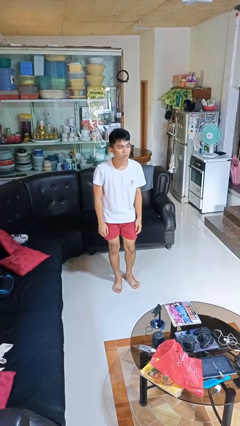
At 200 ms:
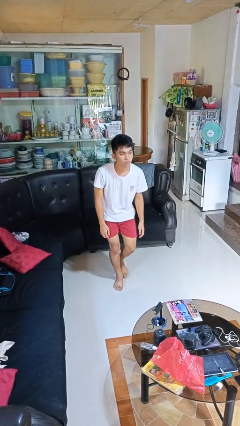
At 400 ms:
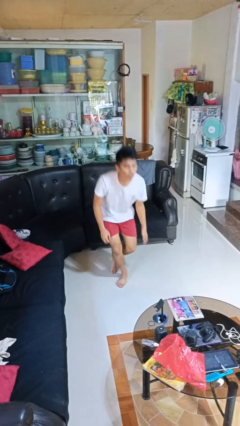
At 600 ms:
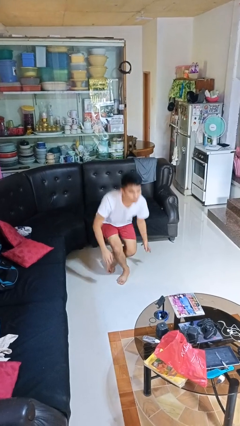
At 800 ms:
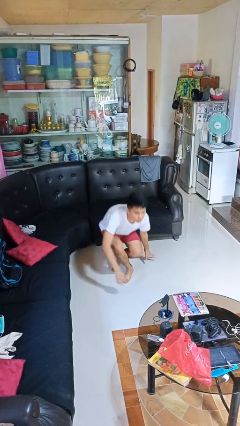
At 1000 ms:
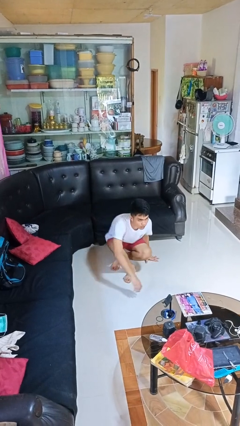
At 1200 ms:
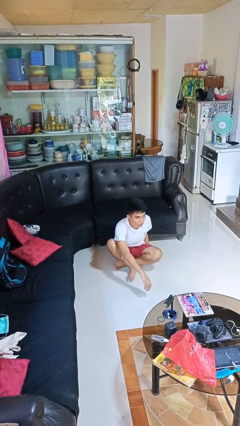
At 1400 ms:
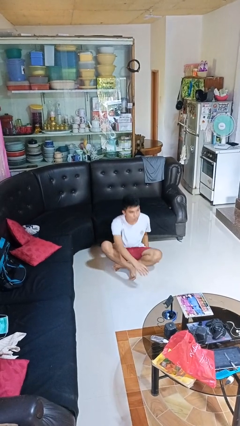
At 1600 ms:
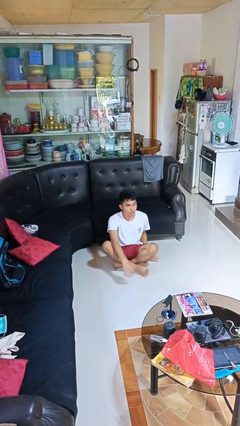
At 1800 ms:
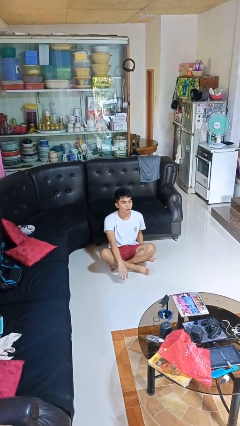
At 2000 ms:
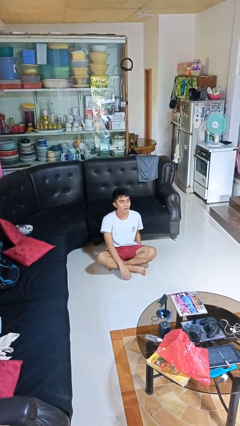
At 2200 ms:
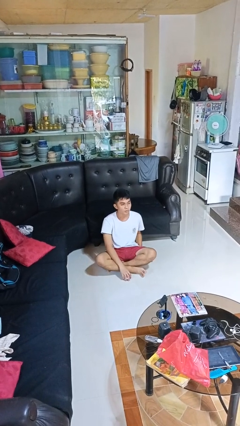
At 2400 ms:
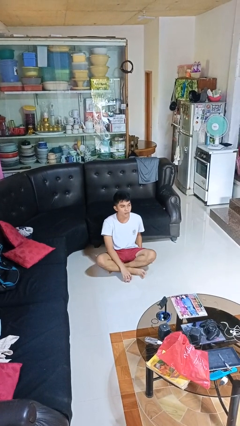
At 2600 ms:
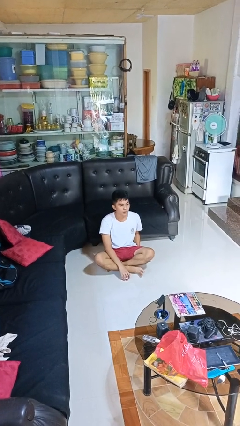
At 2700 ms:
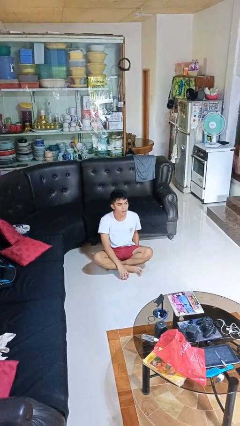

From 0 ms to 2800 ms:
person sits crisscross

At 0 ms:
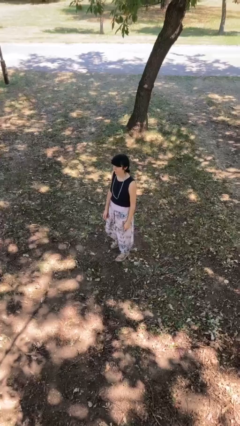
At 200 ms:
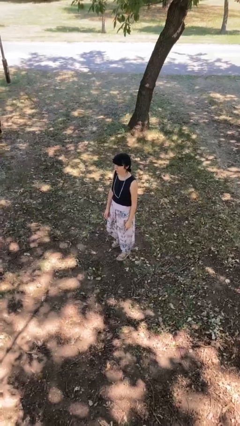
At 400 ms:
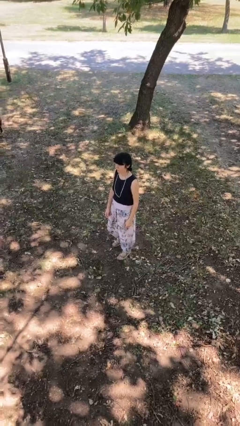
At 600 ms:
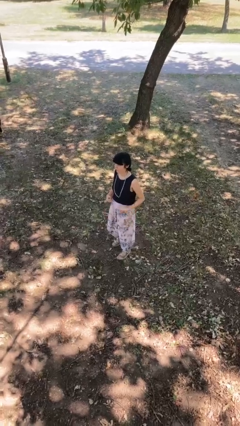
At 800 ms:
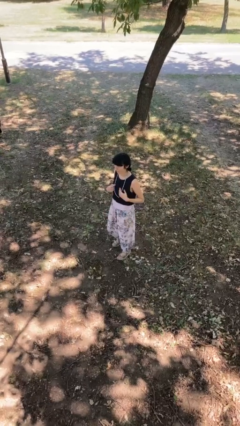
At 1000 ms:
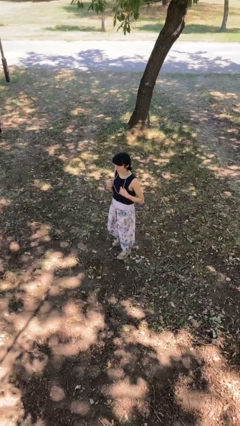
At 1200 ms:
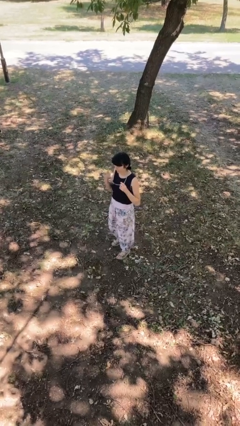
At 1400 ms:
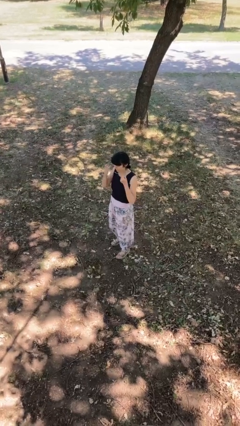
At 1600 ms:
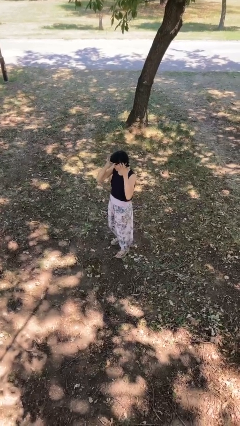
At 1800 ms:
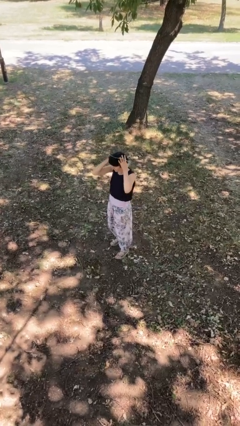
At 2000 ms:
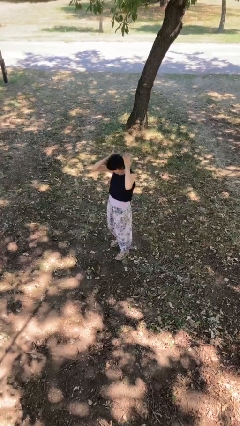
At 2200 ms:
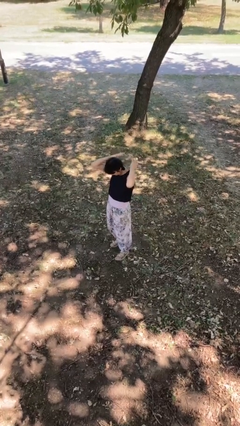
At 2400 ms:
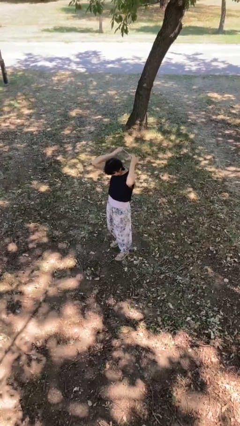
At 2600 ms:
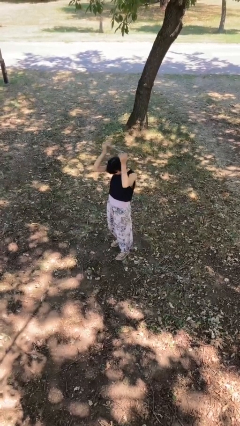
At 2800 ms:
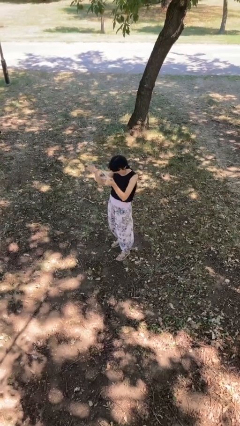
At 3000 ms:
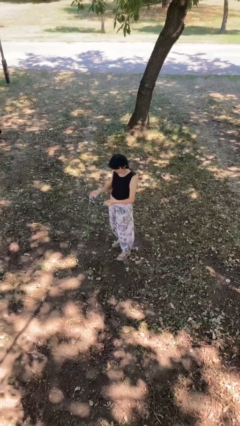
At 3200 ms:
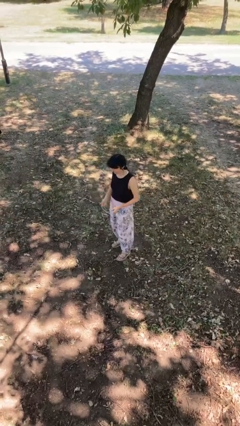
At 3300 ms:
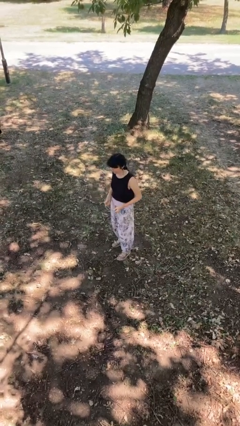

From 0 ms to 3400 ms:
person takes off necklace

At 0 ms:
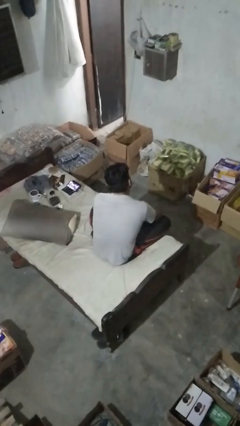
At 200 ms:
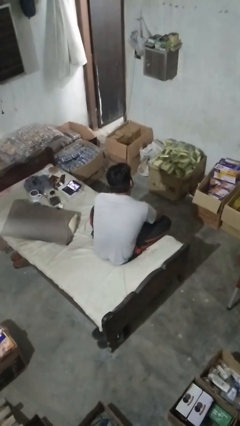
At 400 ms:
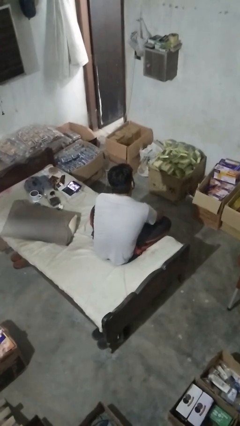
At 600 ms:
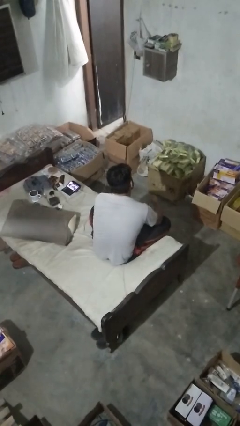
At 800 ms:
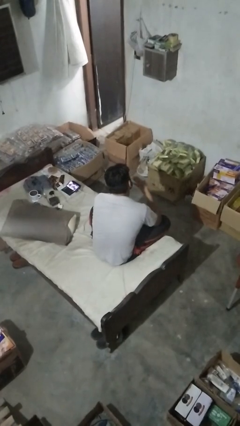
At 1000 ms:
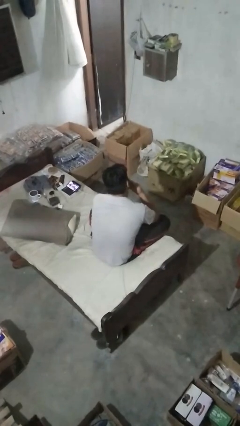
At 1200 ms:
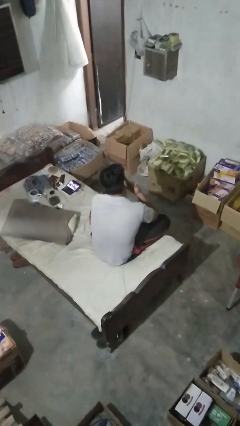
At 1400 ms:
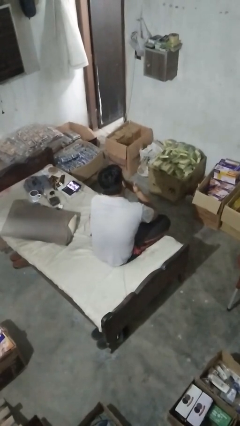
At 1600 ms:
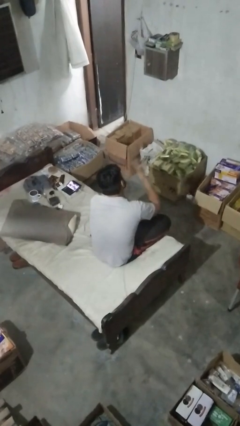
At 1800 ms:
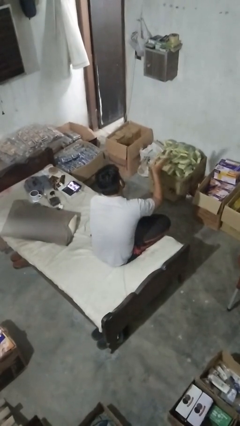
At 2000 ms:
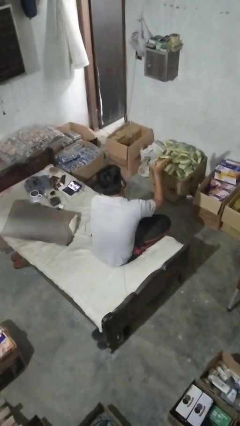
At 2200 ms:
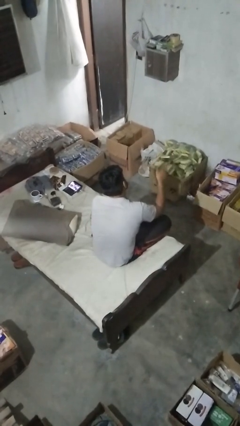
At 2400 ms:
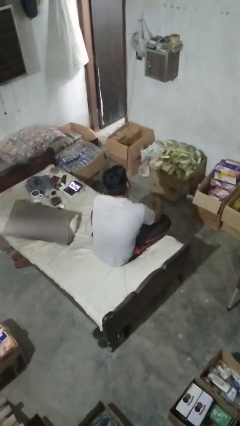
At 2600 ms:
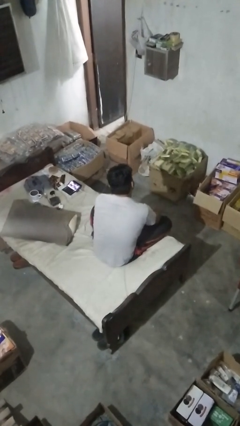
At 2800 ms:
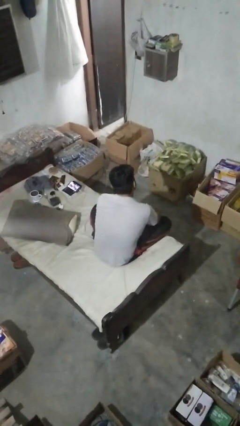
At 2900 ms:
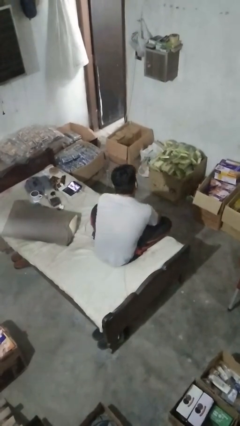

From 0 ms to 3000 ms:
person gestures blow kiss

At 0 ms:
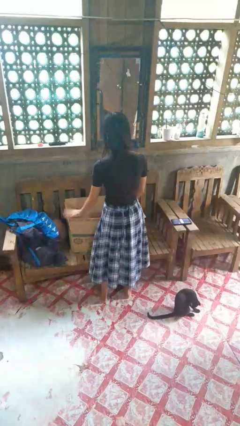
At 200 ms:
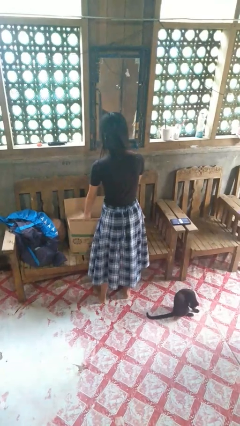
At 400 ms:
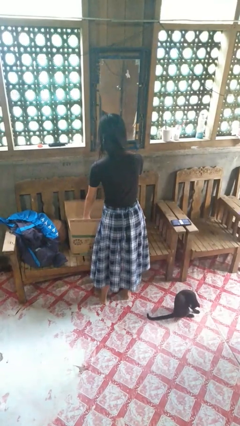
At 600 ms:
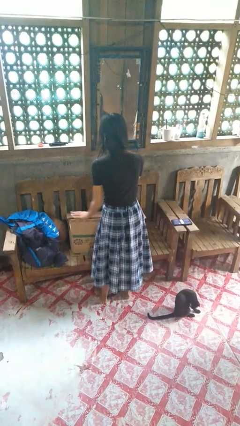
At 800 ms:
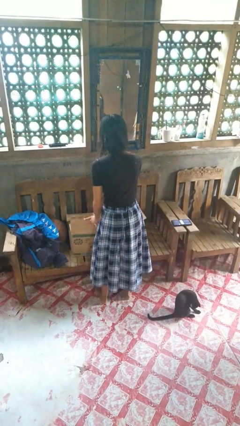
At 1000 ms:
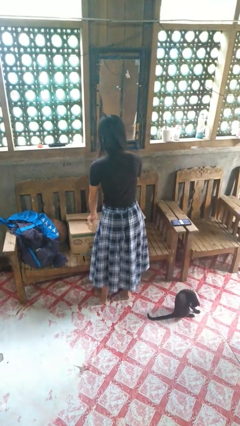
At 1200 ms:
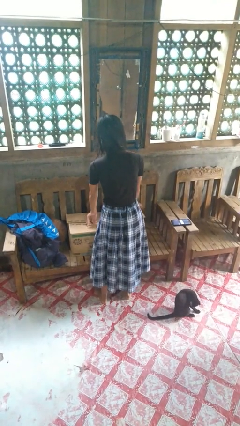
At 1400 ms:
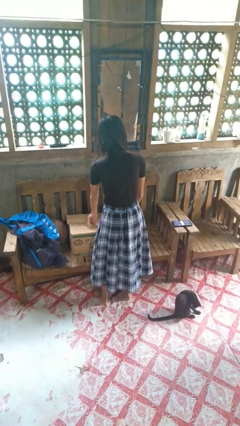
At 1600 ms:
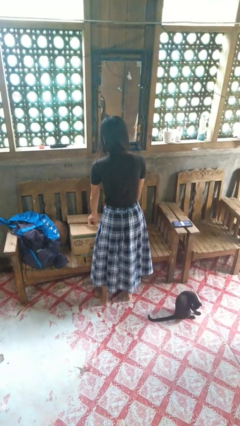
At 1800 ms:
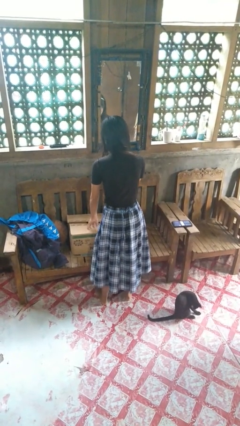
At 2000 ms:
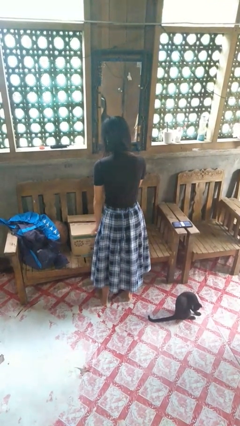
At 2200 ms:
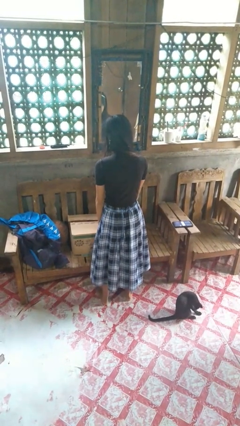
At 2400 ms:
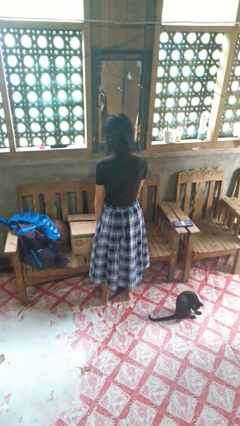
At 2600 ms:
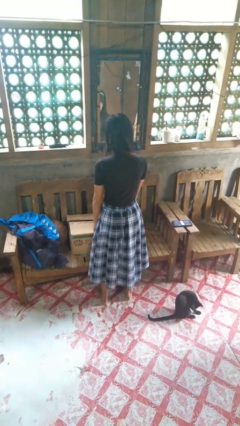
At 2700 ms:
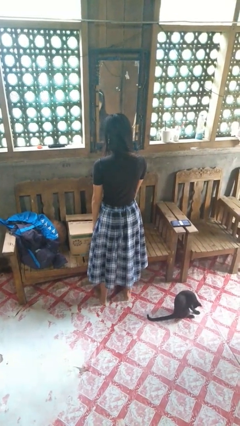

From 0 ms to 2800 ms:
person closes box

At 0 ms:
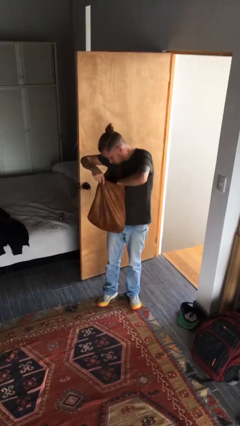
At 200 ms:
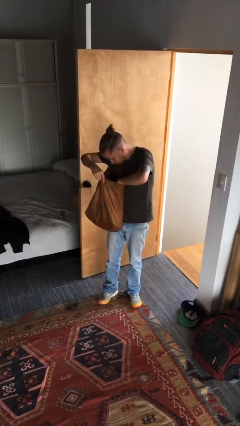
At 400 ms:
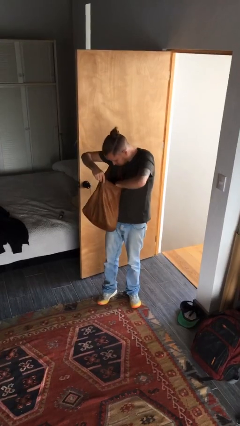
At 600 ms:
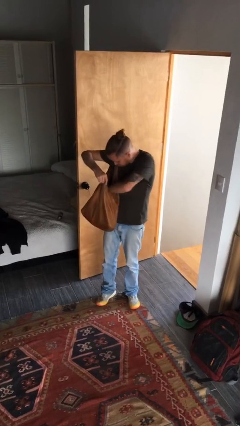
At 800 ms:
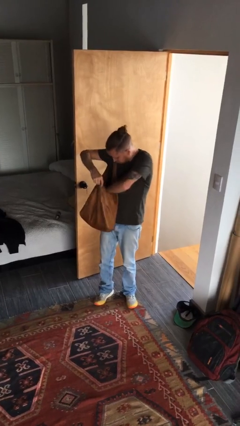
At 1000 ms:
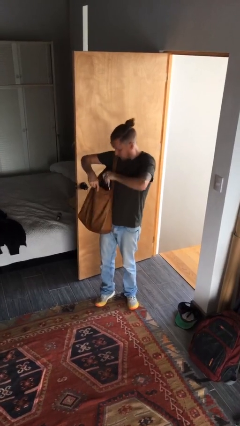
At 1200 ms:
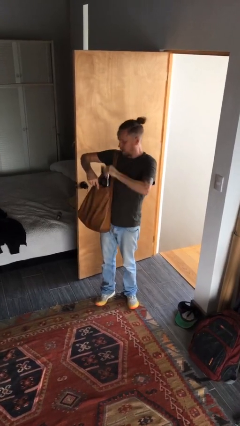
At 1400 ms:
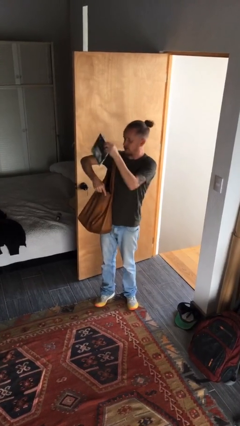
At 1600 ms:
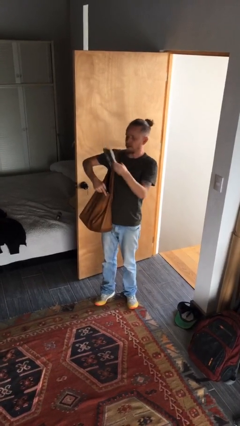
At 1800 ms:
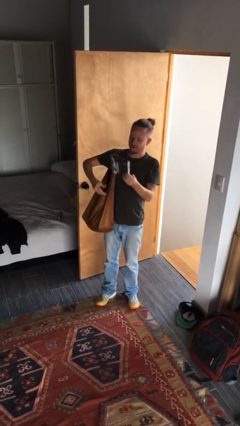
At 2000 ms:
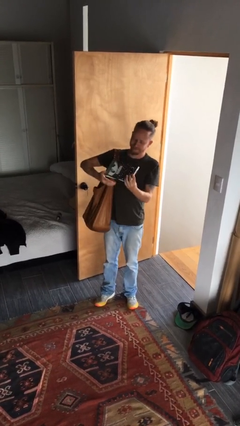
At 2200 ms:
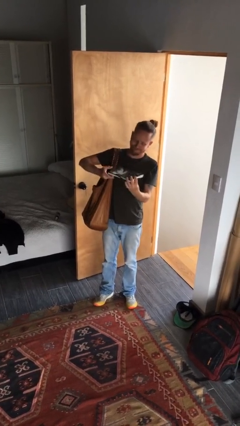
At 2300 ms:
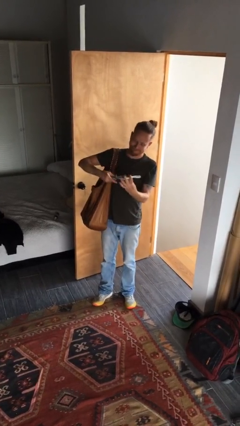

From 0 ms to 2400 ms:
person takes object from purse

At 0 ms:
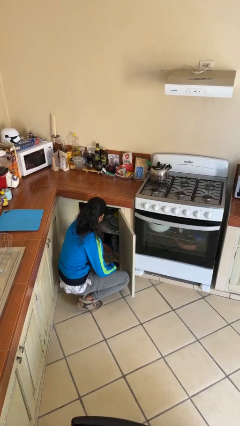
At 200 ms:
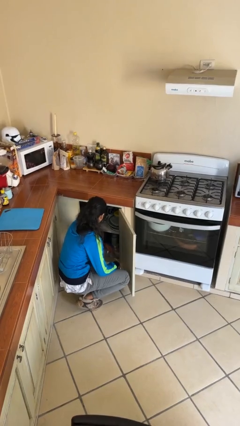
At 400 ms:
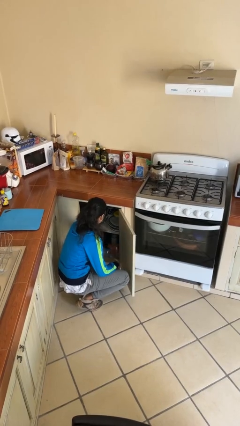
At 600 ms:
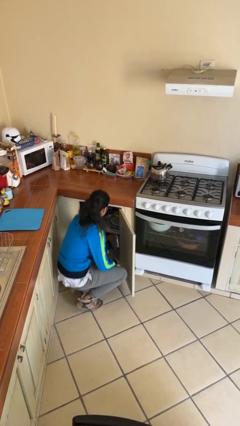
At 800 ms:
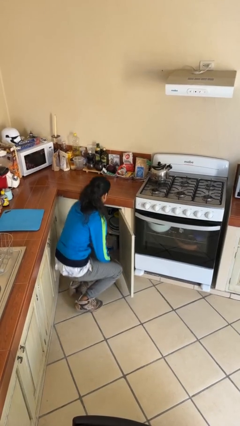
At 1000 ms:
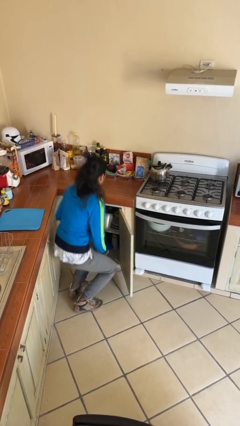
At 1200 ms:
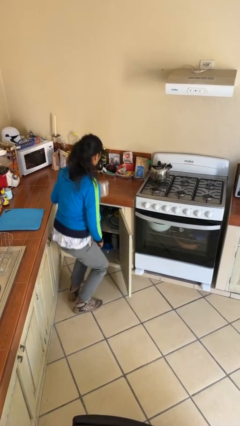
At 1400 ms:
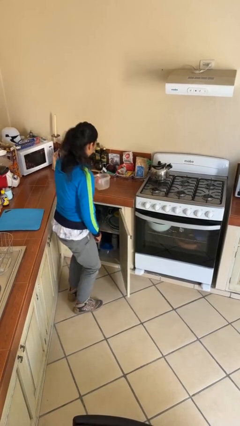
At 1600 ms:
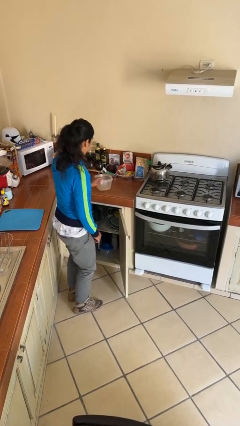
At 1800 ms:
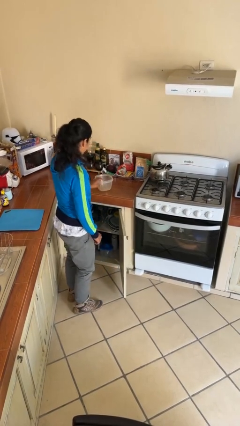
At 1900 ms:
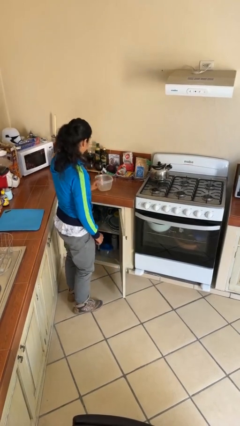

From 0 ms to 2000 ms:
person takes object from cabinet

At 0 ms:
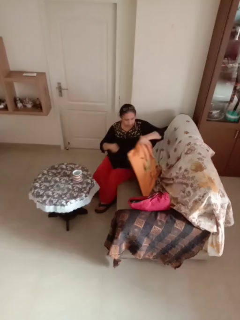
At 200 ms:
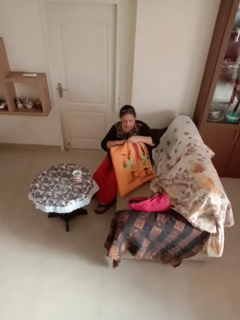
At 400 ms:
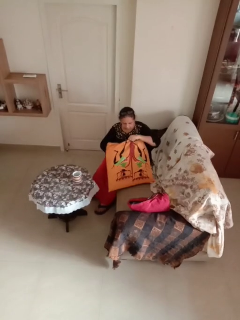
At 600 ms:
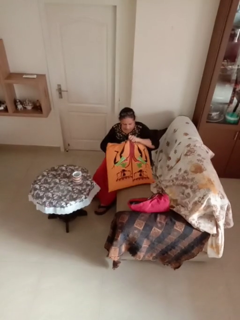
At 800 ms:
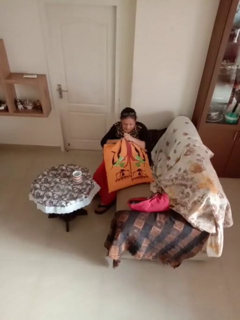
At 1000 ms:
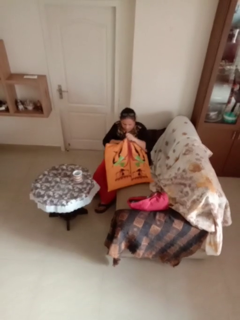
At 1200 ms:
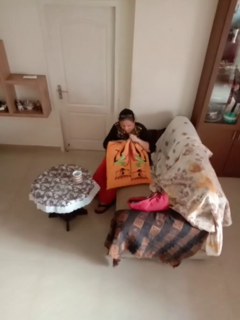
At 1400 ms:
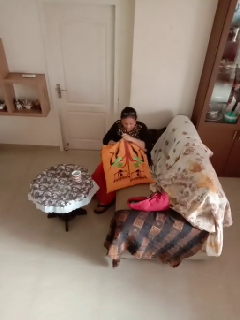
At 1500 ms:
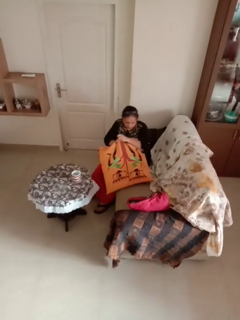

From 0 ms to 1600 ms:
person searches in couch
